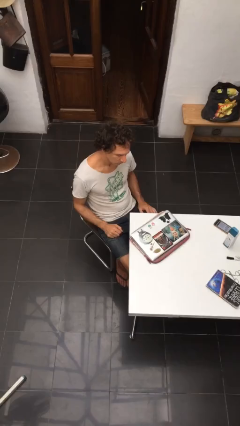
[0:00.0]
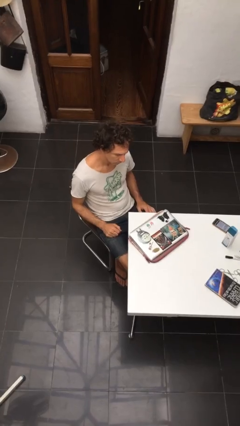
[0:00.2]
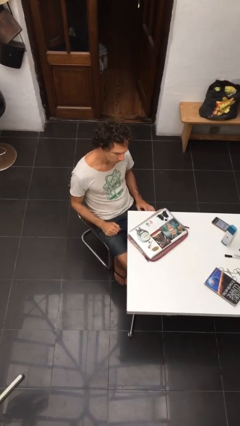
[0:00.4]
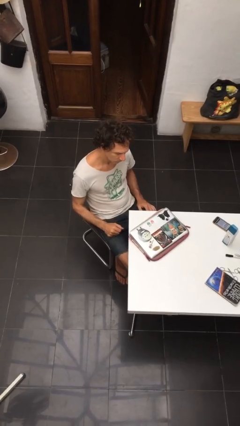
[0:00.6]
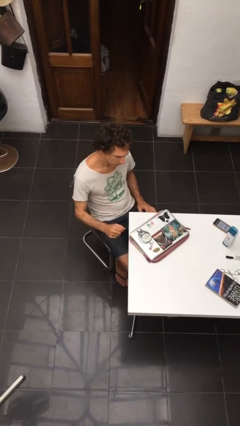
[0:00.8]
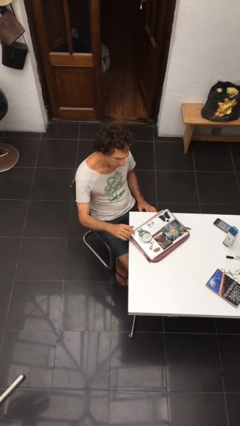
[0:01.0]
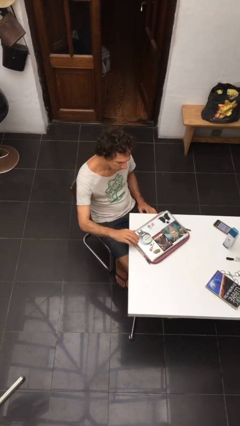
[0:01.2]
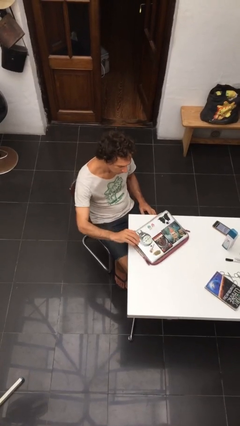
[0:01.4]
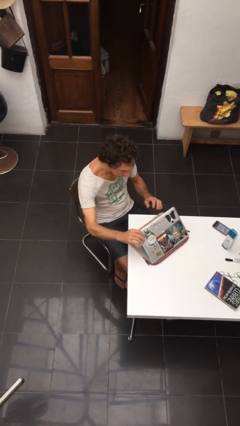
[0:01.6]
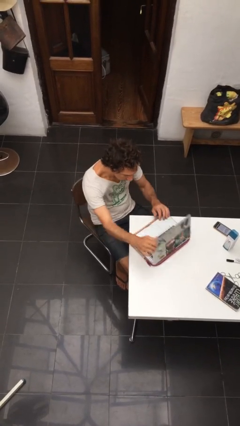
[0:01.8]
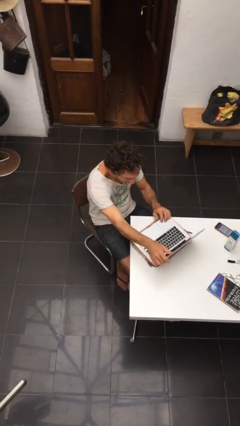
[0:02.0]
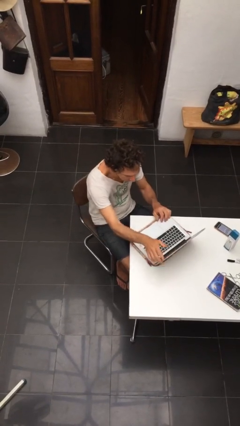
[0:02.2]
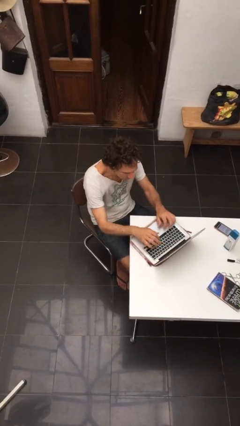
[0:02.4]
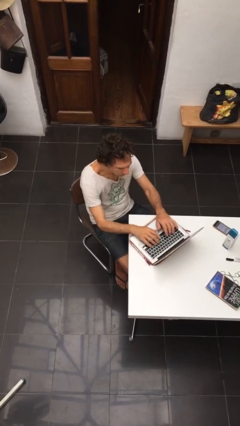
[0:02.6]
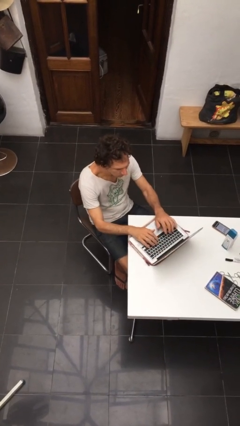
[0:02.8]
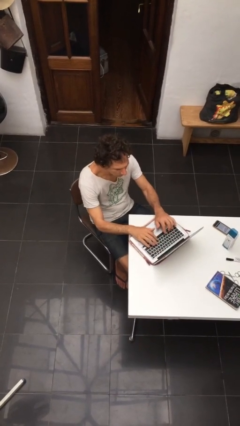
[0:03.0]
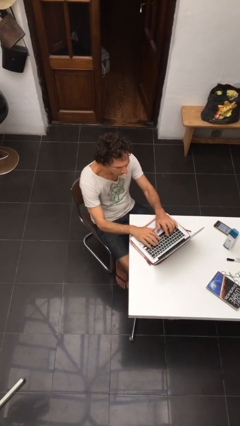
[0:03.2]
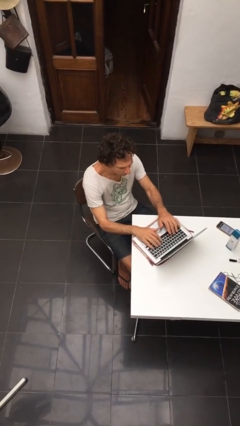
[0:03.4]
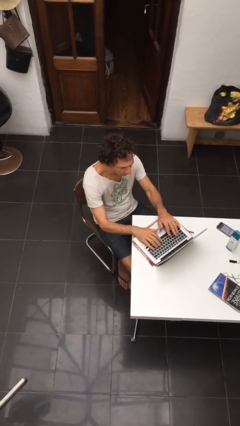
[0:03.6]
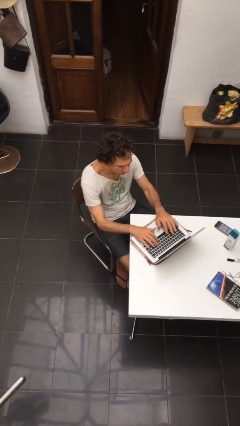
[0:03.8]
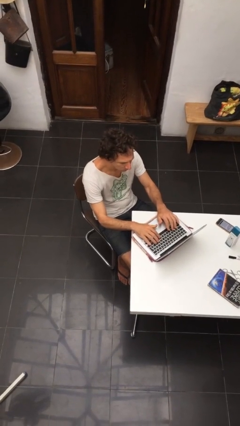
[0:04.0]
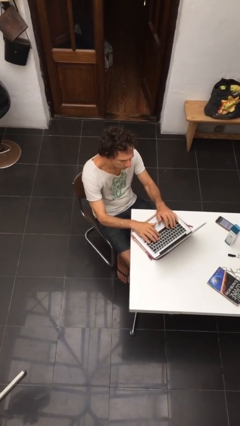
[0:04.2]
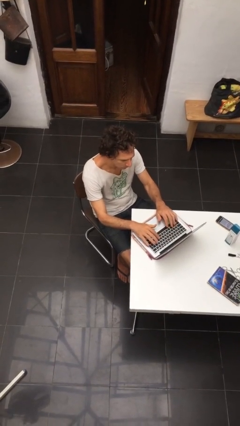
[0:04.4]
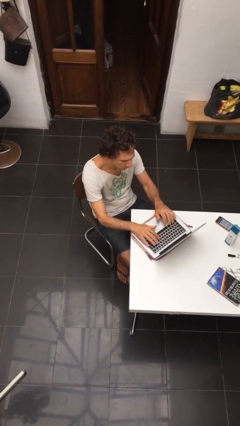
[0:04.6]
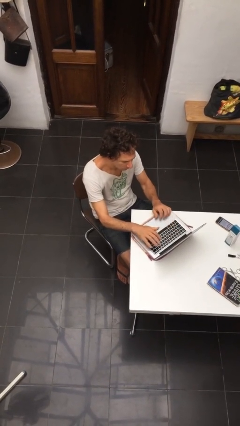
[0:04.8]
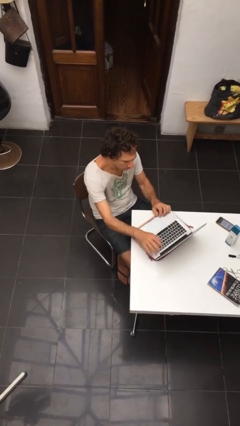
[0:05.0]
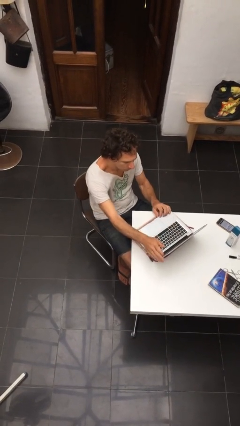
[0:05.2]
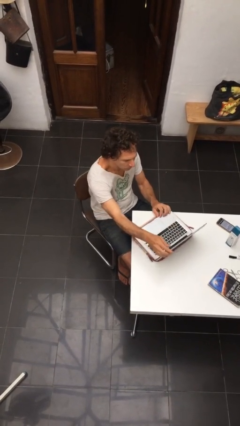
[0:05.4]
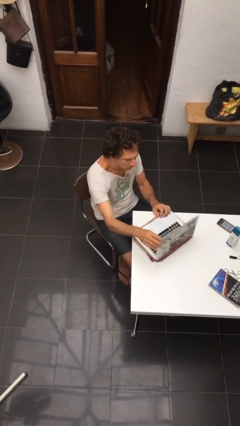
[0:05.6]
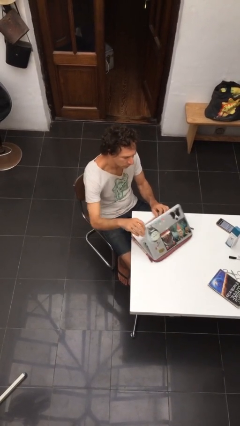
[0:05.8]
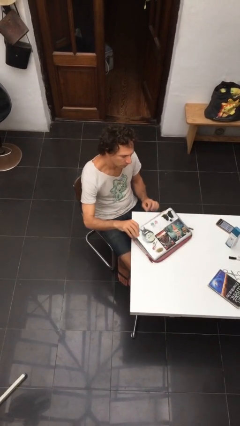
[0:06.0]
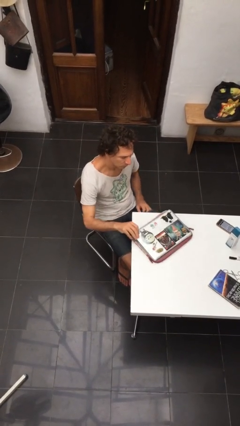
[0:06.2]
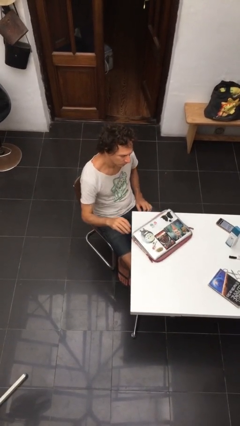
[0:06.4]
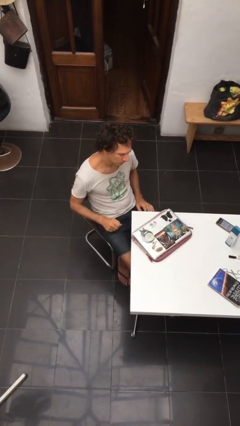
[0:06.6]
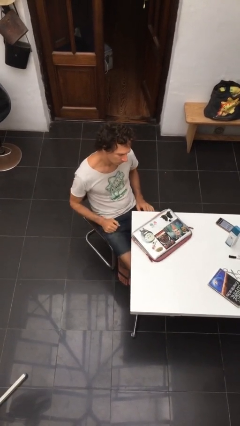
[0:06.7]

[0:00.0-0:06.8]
person interacts with laptop

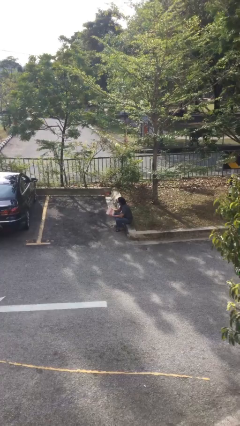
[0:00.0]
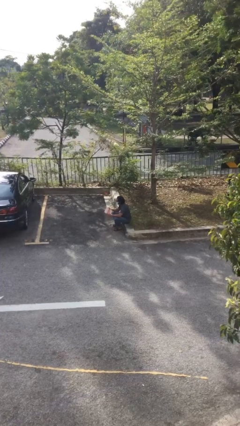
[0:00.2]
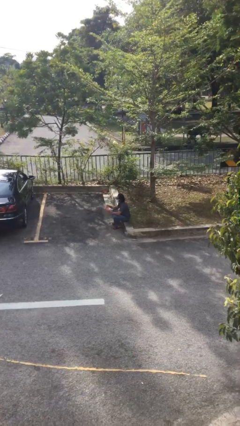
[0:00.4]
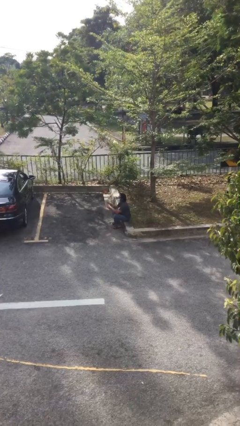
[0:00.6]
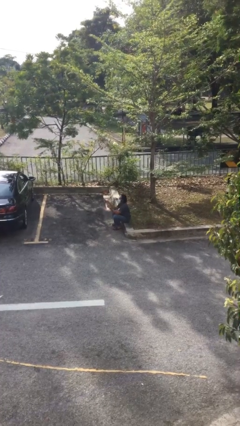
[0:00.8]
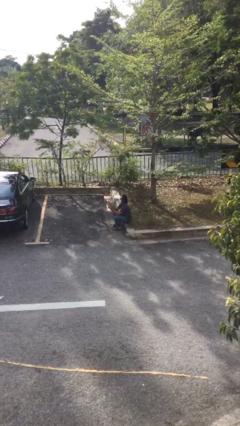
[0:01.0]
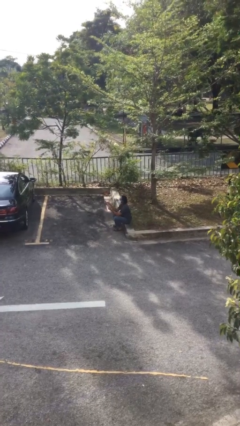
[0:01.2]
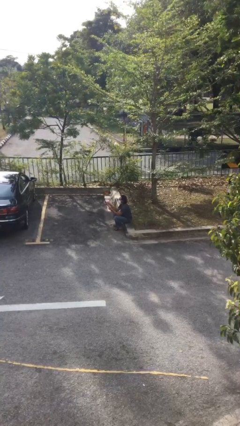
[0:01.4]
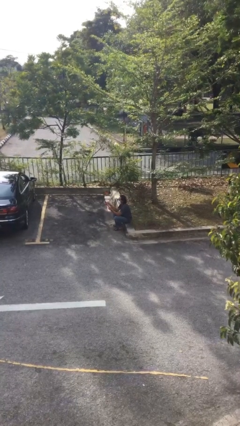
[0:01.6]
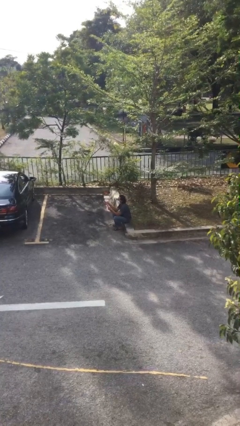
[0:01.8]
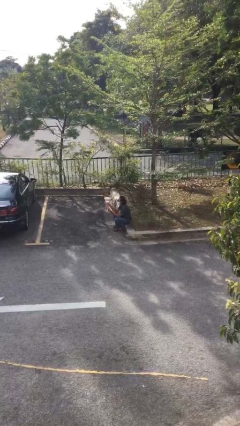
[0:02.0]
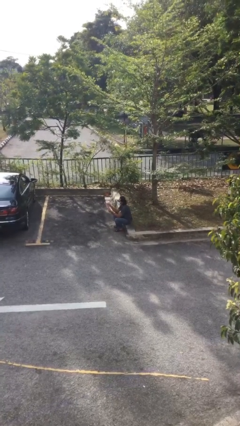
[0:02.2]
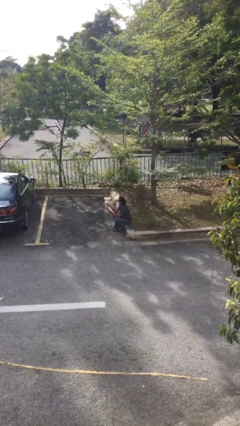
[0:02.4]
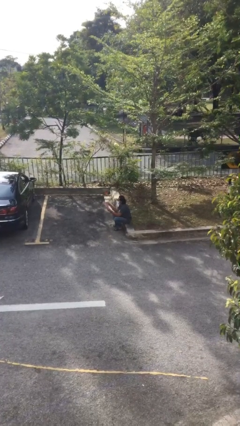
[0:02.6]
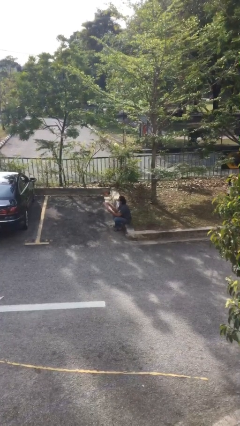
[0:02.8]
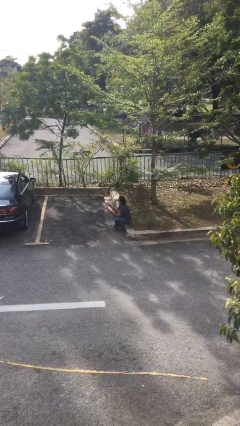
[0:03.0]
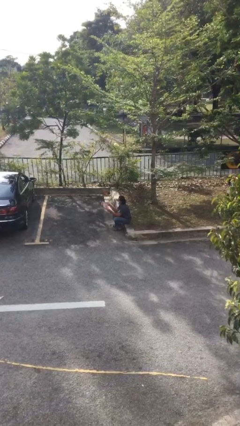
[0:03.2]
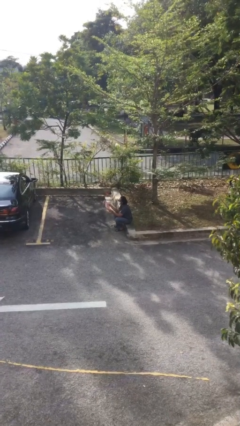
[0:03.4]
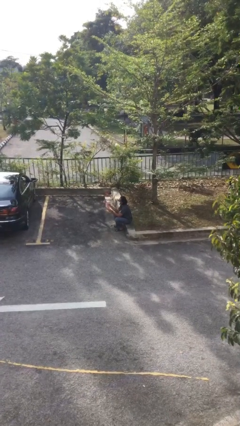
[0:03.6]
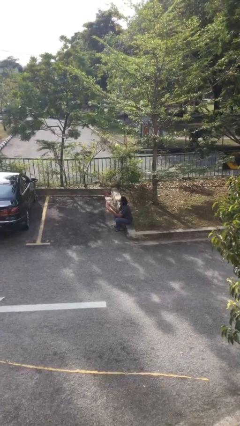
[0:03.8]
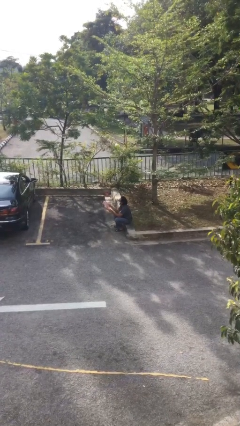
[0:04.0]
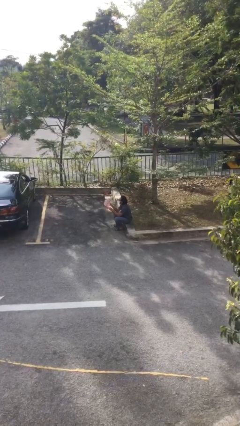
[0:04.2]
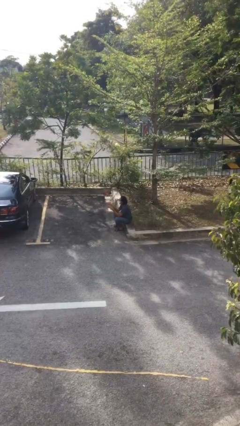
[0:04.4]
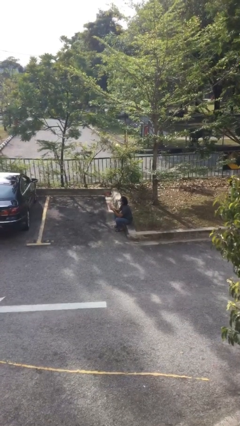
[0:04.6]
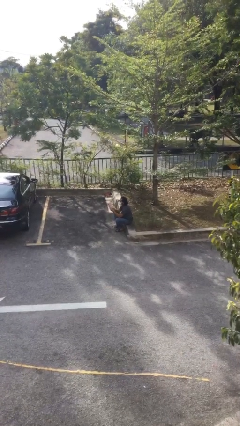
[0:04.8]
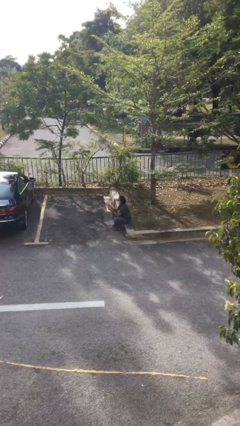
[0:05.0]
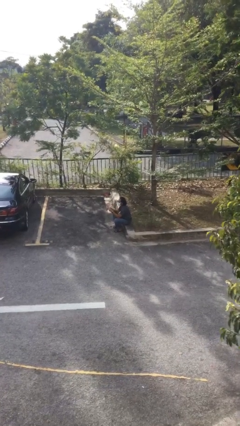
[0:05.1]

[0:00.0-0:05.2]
person reads document

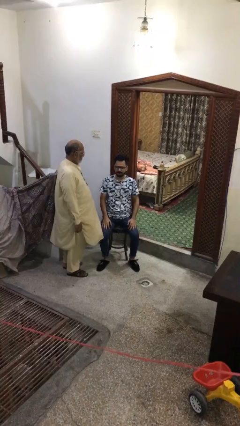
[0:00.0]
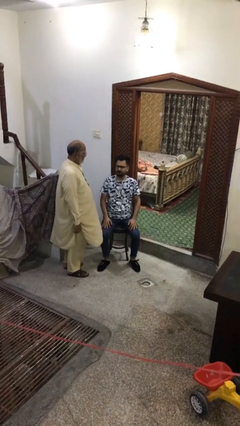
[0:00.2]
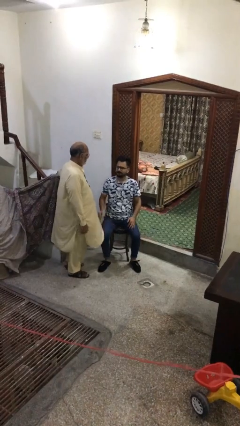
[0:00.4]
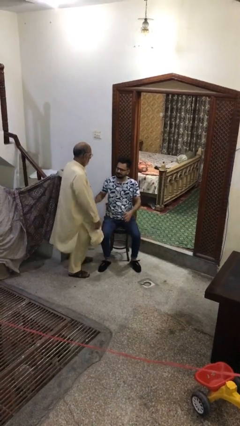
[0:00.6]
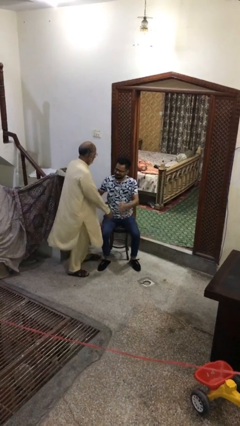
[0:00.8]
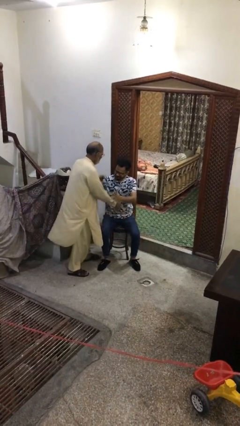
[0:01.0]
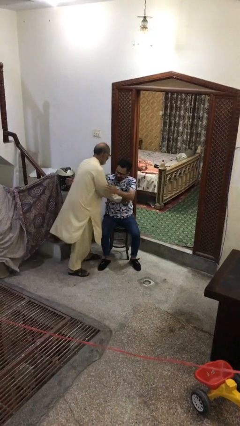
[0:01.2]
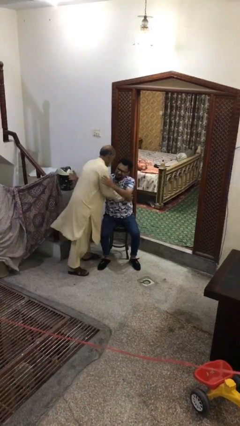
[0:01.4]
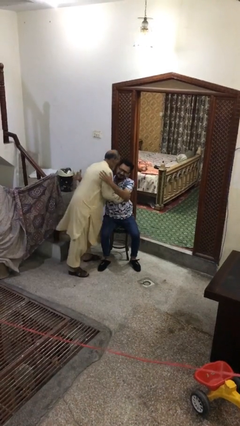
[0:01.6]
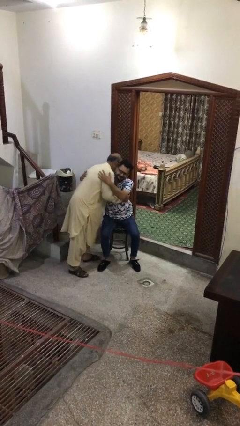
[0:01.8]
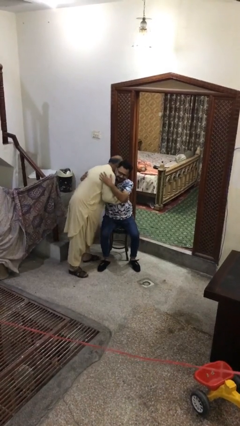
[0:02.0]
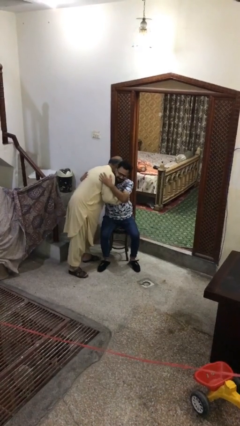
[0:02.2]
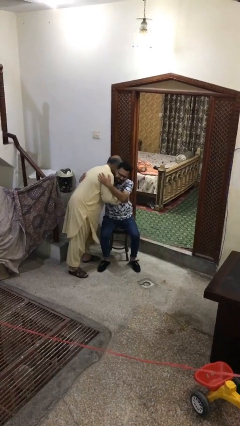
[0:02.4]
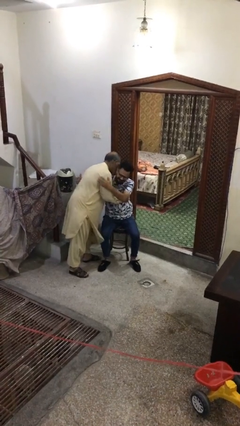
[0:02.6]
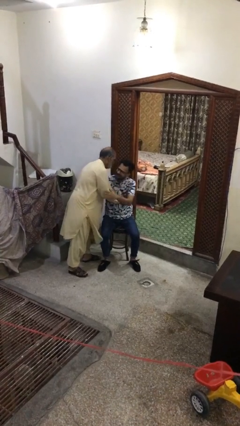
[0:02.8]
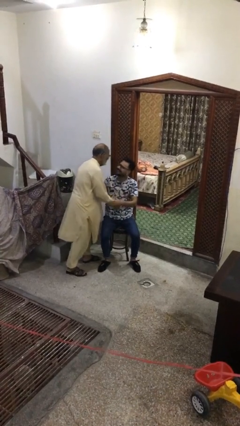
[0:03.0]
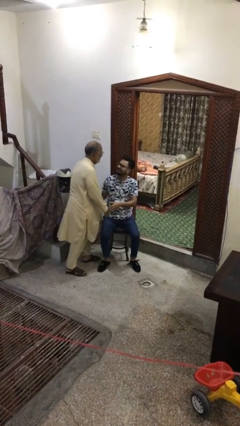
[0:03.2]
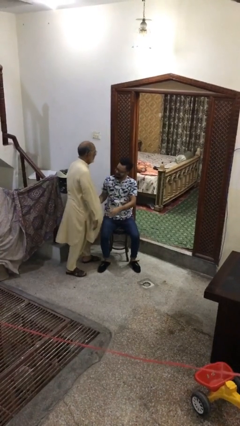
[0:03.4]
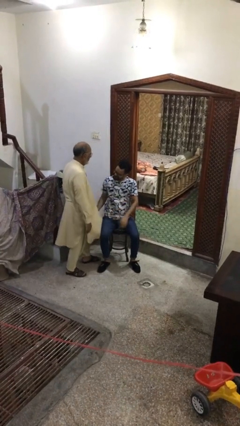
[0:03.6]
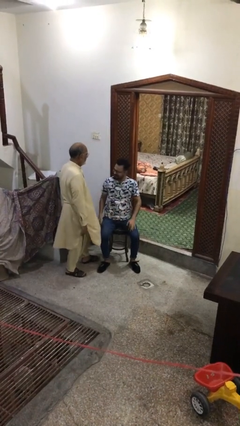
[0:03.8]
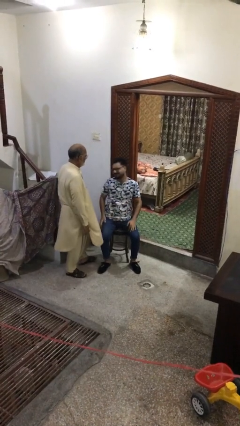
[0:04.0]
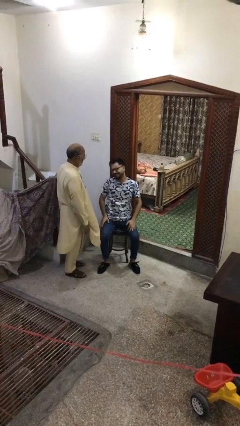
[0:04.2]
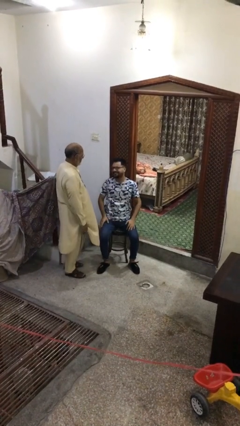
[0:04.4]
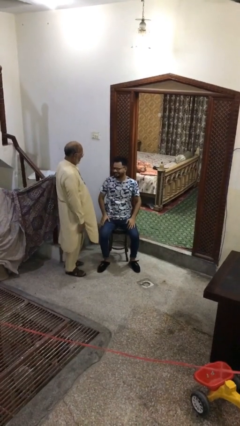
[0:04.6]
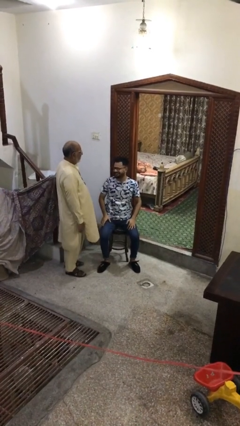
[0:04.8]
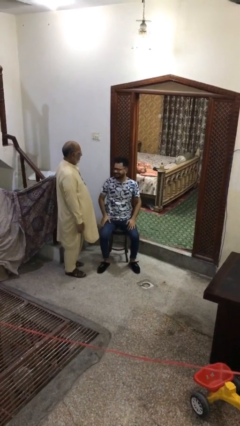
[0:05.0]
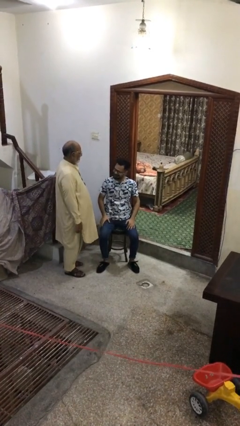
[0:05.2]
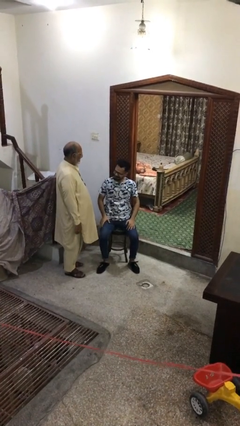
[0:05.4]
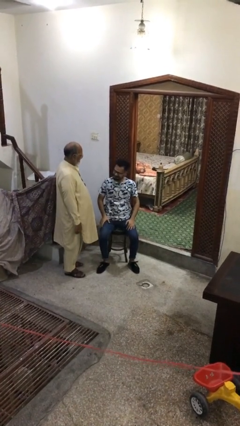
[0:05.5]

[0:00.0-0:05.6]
person embraces person

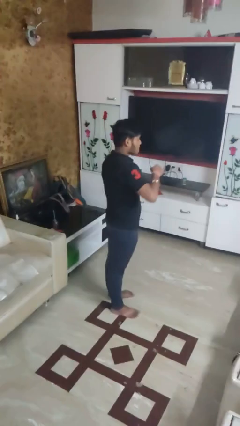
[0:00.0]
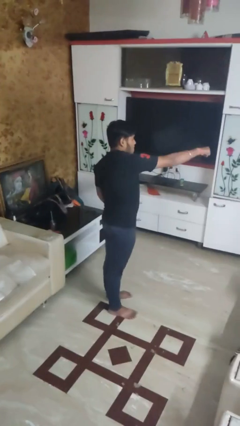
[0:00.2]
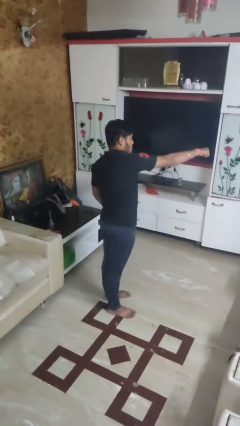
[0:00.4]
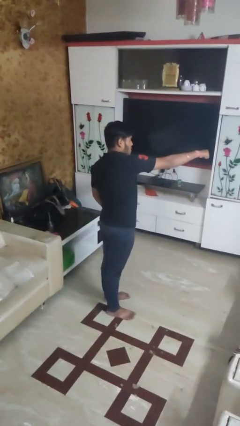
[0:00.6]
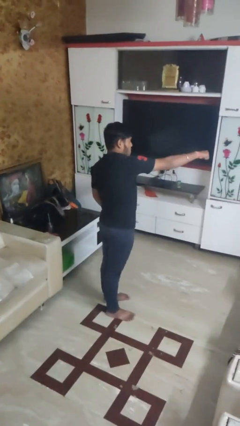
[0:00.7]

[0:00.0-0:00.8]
person punches
